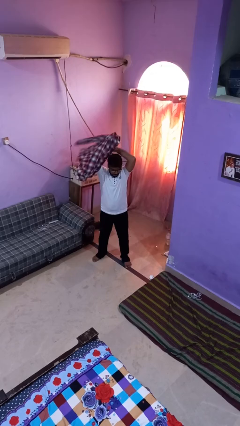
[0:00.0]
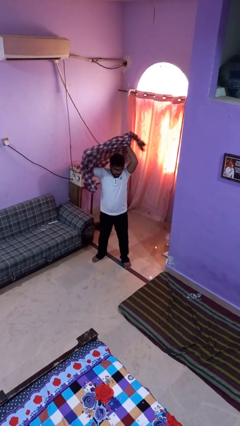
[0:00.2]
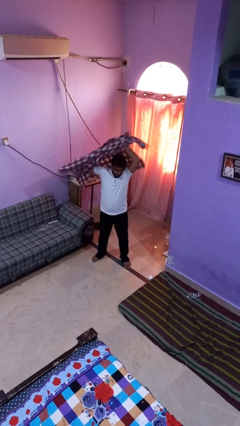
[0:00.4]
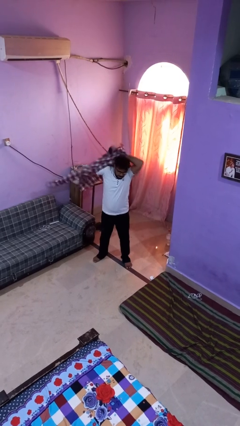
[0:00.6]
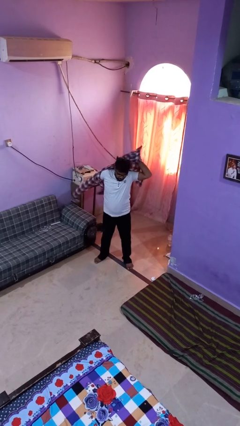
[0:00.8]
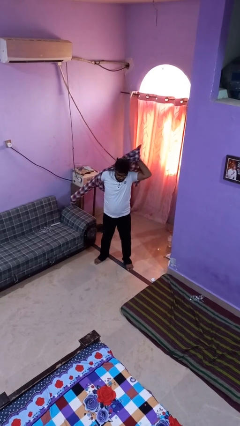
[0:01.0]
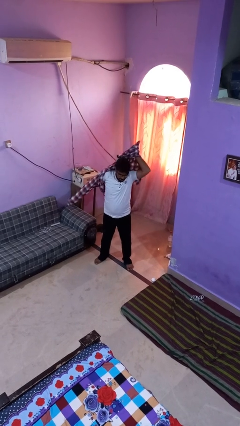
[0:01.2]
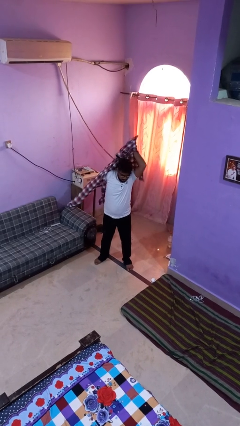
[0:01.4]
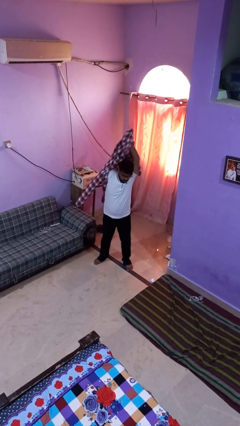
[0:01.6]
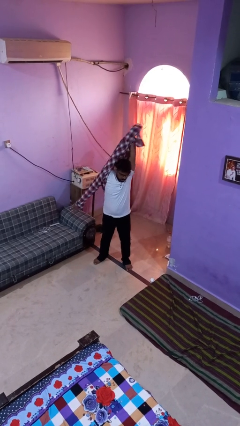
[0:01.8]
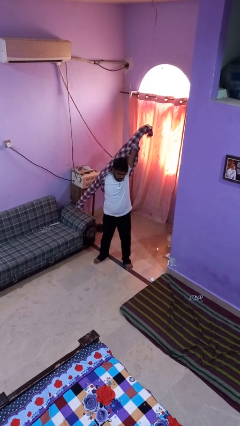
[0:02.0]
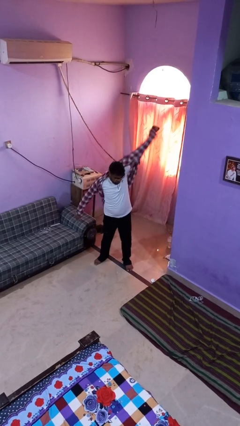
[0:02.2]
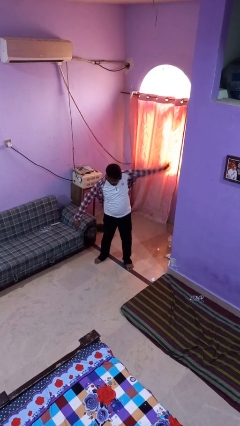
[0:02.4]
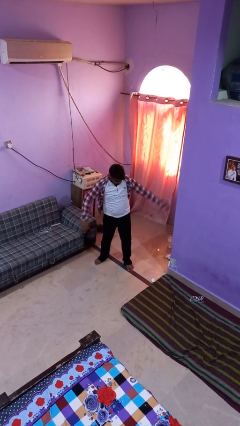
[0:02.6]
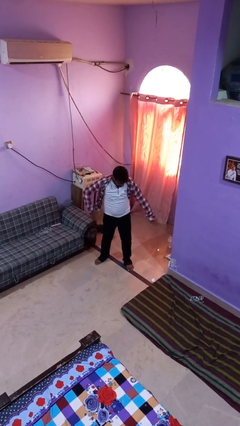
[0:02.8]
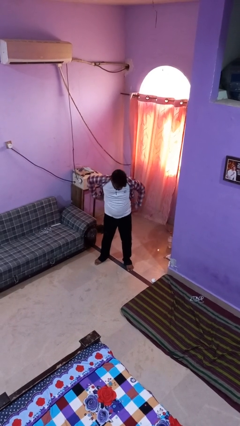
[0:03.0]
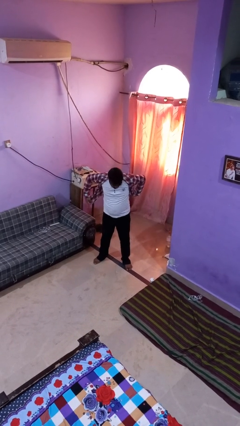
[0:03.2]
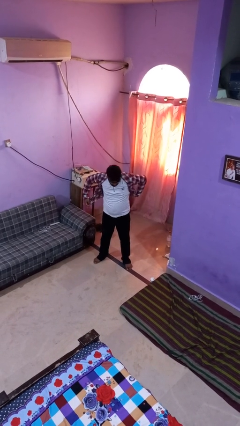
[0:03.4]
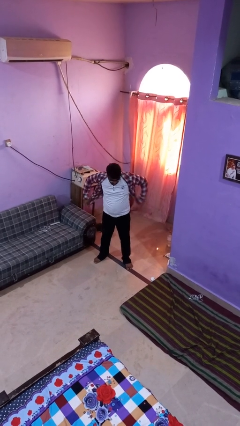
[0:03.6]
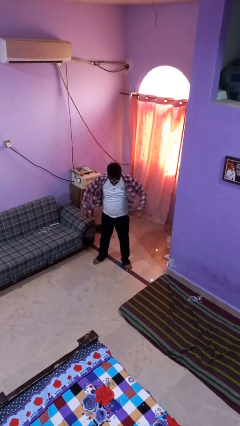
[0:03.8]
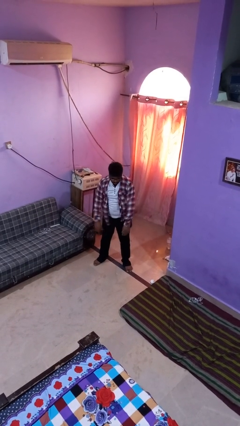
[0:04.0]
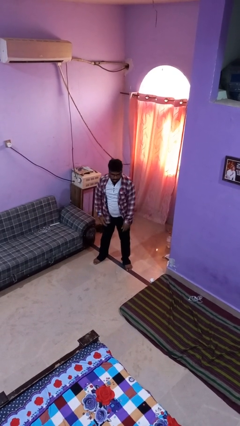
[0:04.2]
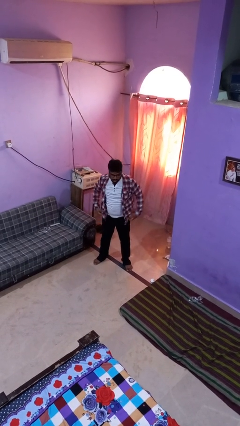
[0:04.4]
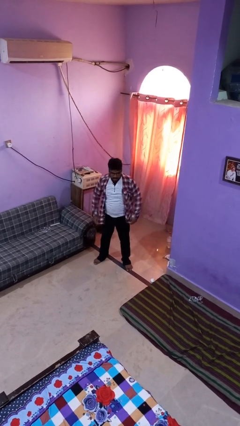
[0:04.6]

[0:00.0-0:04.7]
person puts on shirt

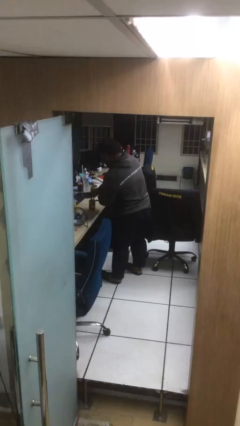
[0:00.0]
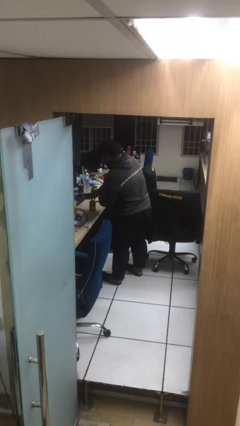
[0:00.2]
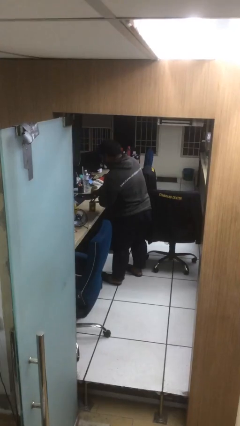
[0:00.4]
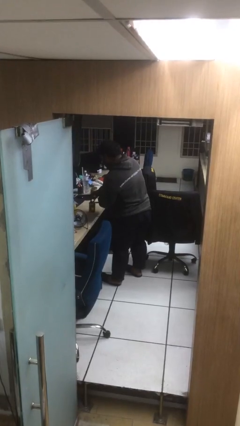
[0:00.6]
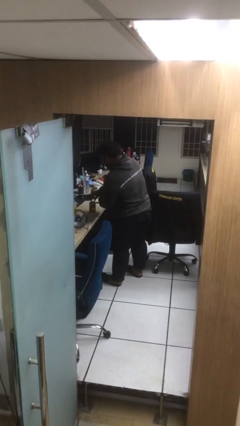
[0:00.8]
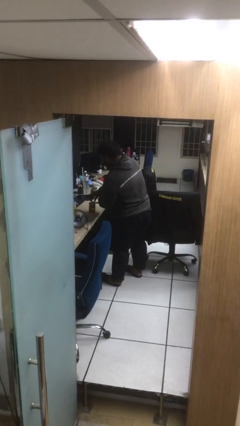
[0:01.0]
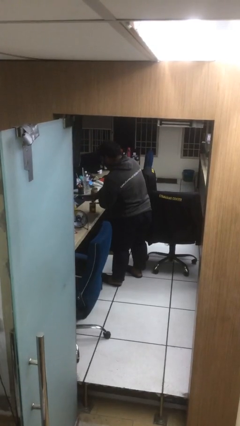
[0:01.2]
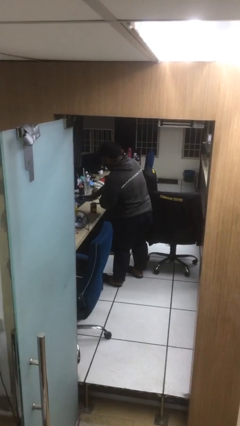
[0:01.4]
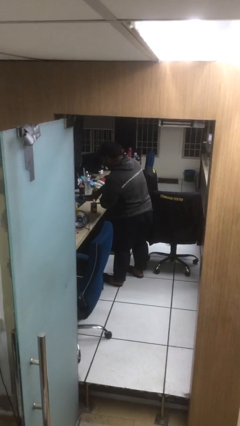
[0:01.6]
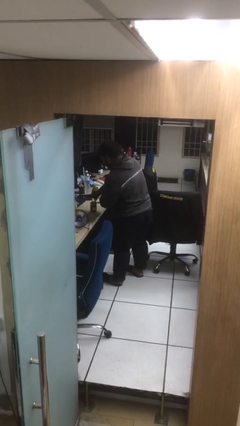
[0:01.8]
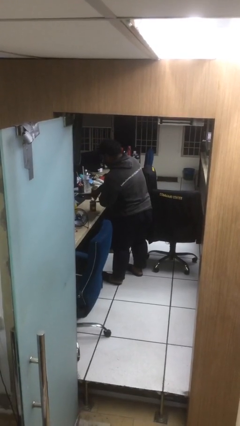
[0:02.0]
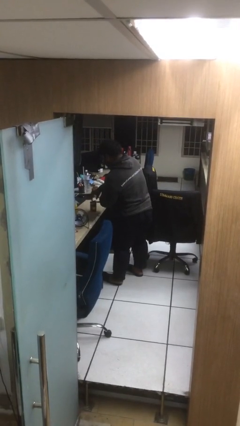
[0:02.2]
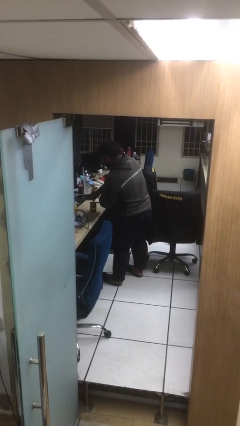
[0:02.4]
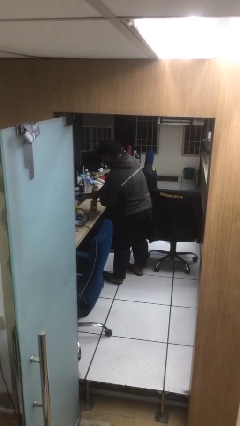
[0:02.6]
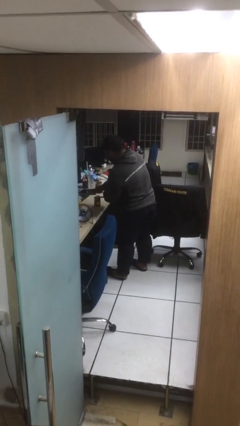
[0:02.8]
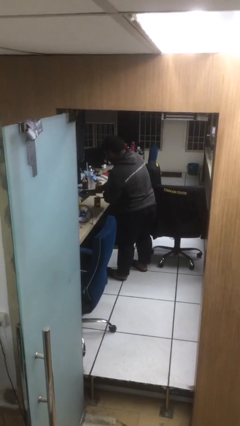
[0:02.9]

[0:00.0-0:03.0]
person opens can with can opener

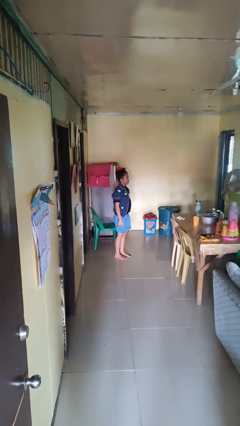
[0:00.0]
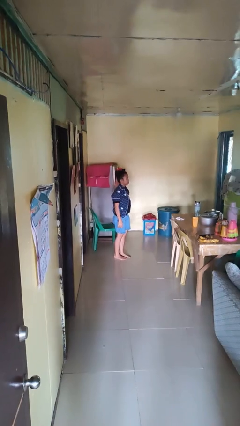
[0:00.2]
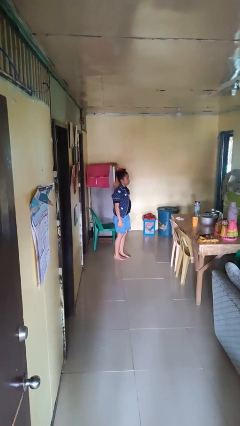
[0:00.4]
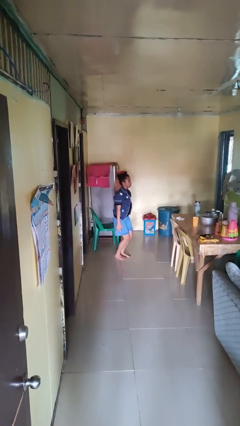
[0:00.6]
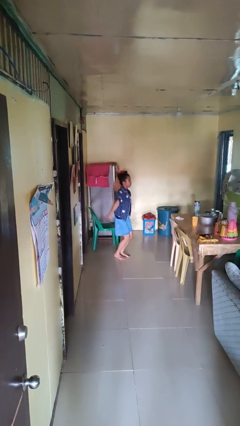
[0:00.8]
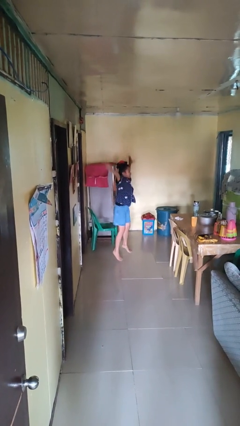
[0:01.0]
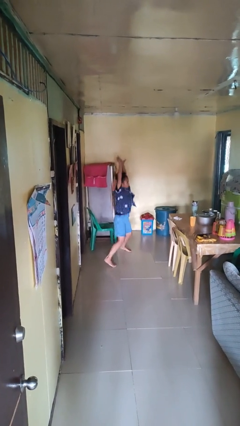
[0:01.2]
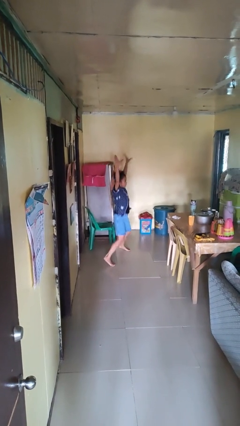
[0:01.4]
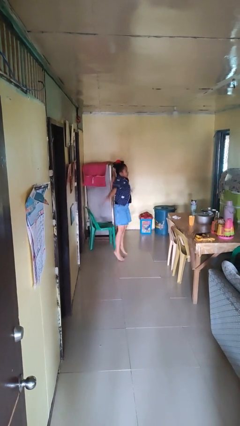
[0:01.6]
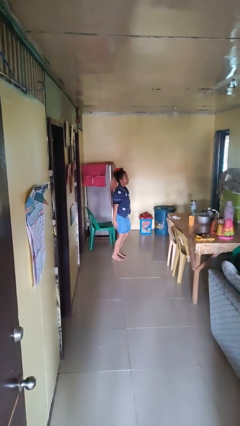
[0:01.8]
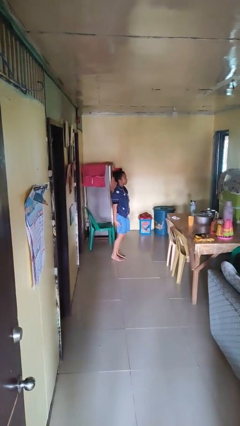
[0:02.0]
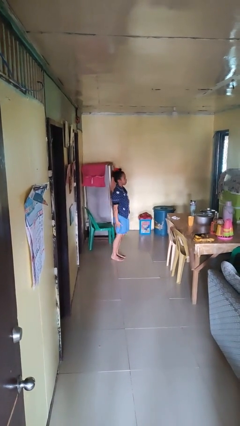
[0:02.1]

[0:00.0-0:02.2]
person exercises with jumping jacks

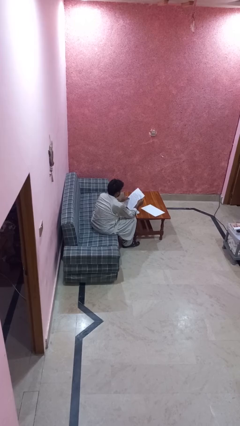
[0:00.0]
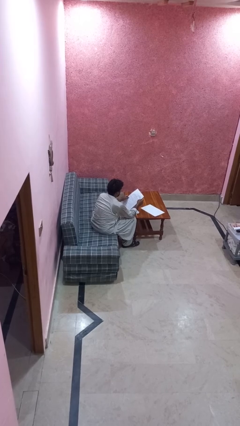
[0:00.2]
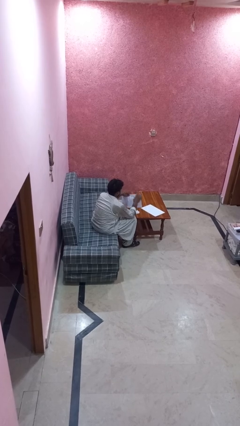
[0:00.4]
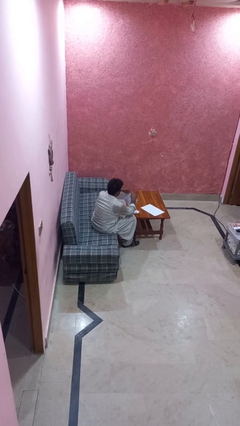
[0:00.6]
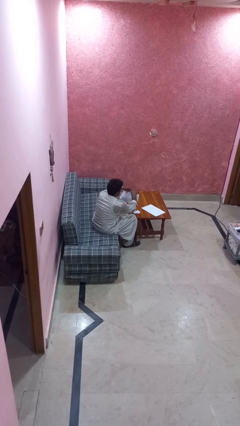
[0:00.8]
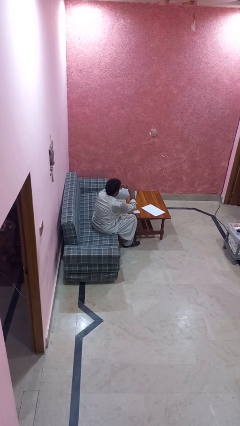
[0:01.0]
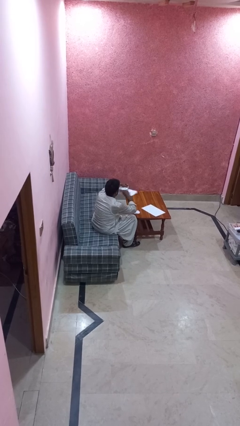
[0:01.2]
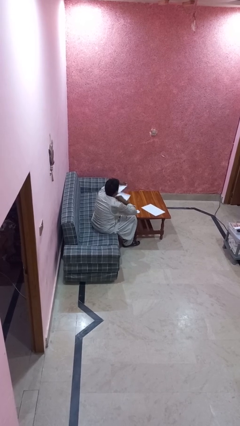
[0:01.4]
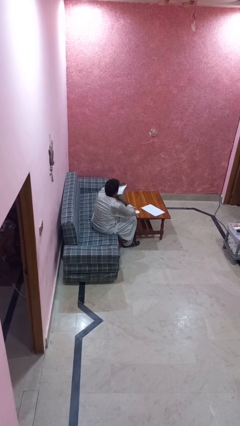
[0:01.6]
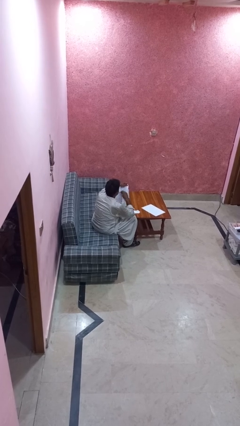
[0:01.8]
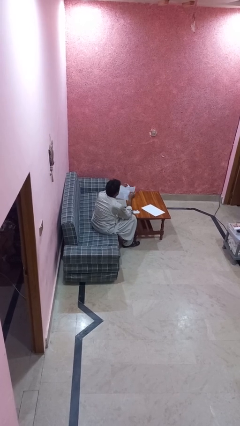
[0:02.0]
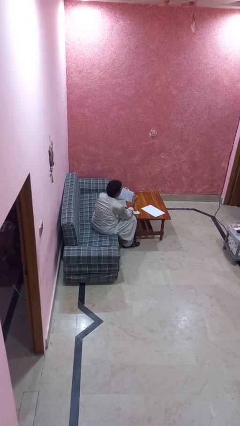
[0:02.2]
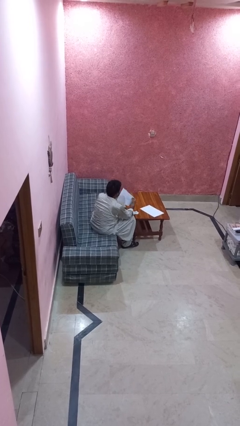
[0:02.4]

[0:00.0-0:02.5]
person tears paper

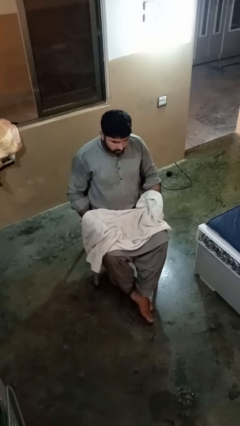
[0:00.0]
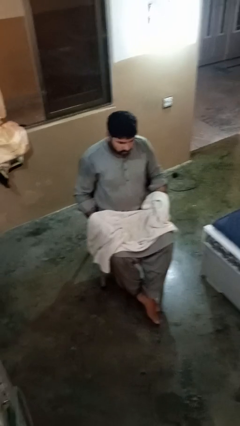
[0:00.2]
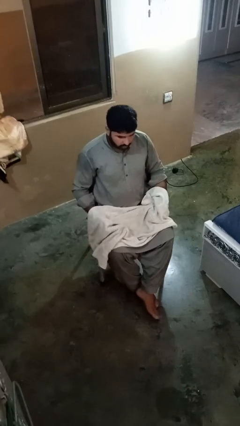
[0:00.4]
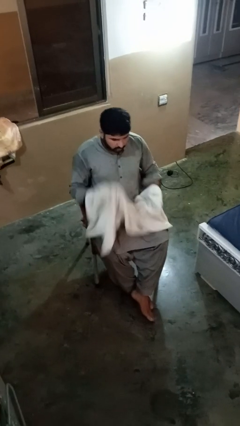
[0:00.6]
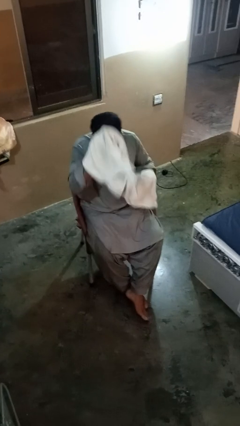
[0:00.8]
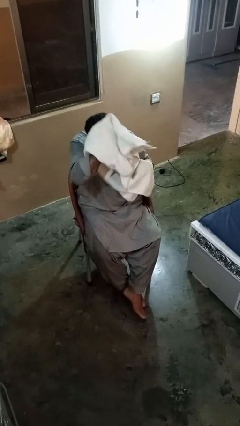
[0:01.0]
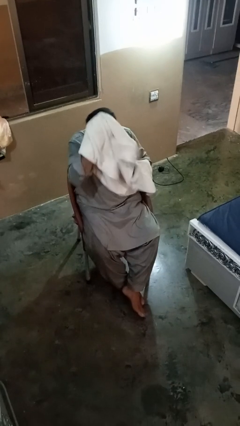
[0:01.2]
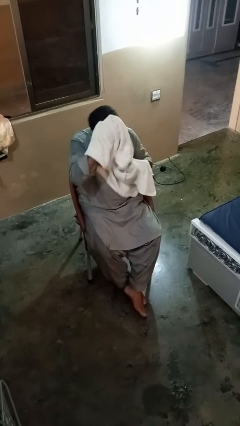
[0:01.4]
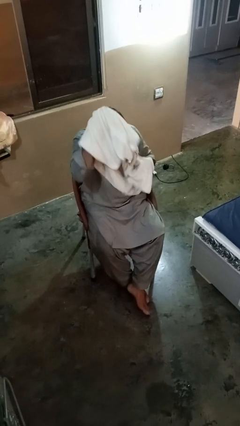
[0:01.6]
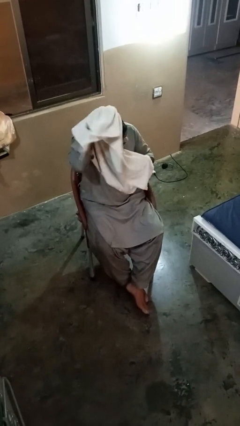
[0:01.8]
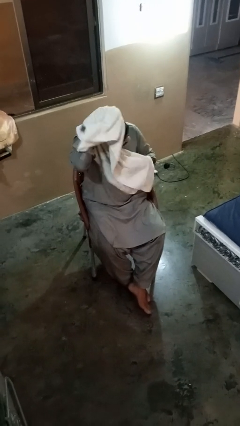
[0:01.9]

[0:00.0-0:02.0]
person dries hair with towel

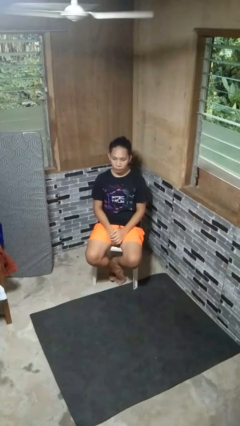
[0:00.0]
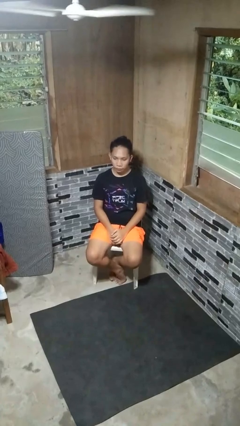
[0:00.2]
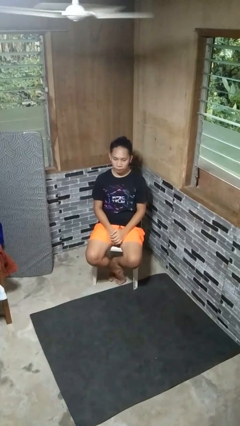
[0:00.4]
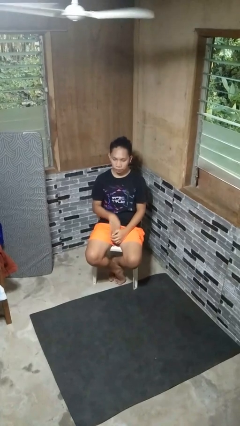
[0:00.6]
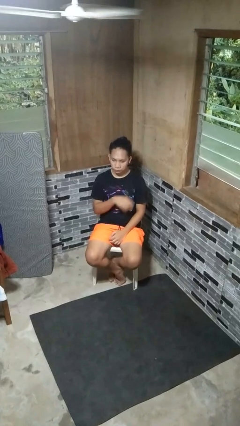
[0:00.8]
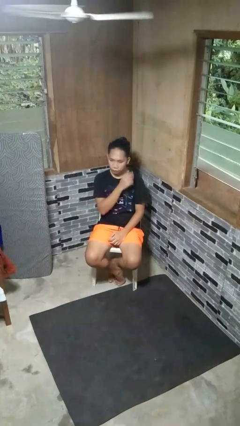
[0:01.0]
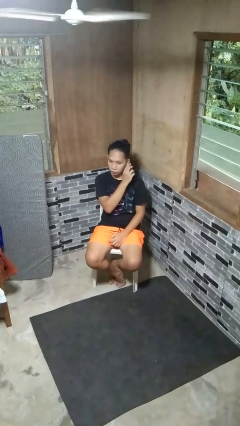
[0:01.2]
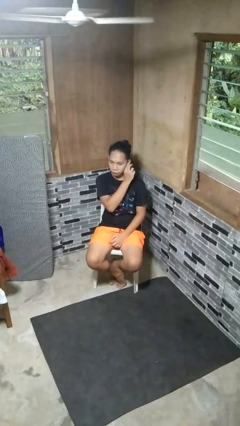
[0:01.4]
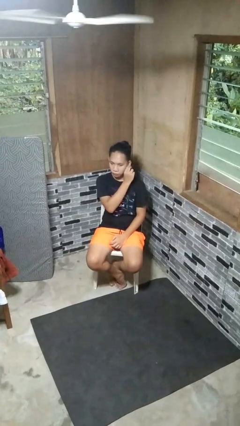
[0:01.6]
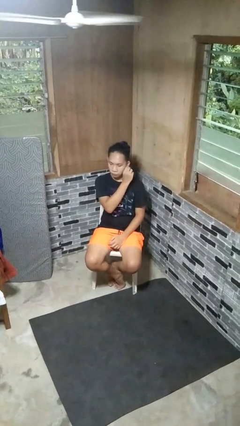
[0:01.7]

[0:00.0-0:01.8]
person touches earlobe

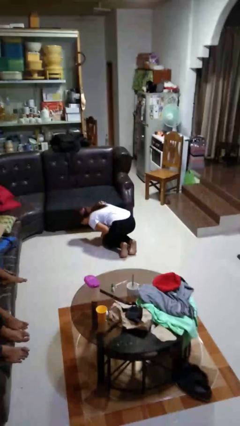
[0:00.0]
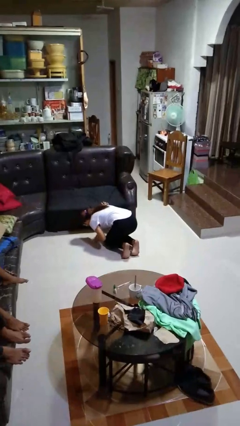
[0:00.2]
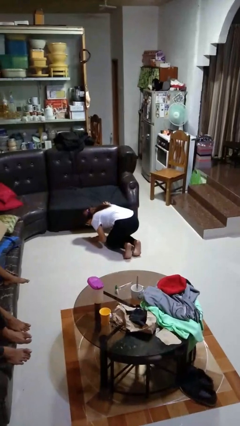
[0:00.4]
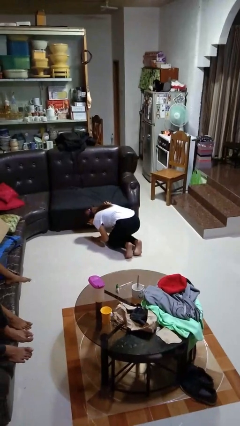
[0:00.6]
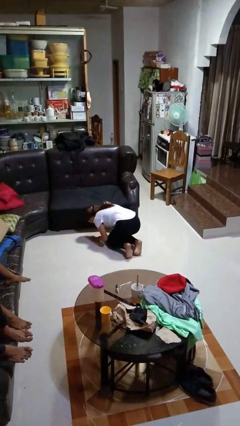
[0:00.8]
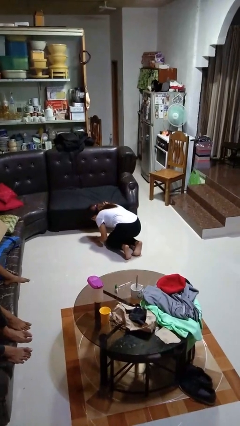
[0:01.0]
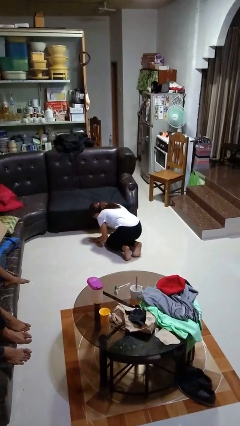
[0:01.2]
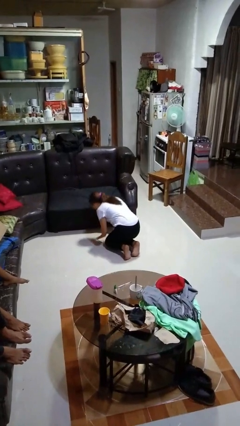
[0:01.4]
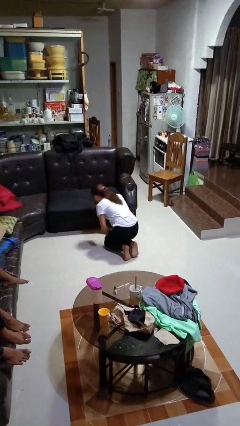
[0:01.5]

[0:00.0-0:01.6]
person searches under couch
